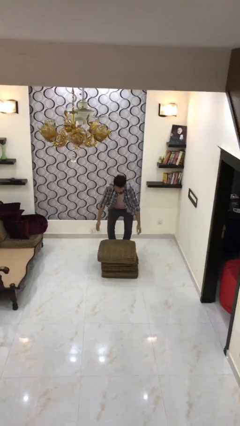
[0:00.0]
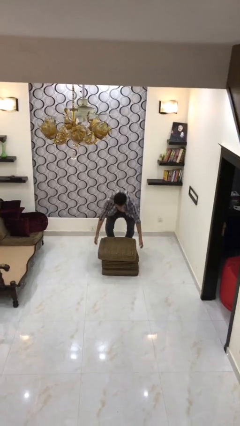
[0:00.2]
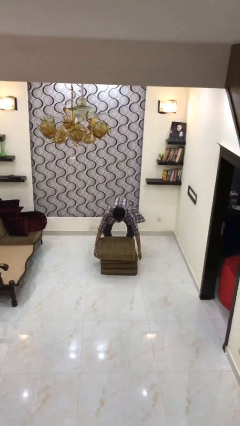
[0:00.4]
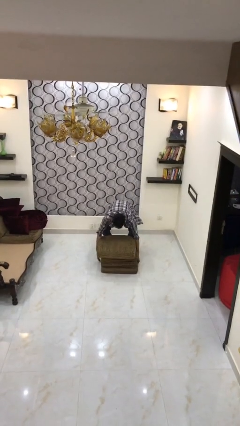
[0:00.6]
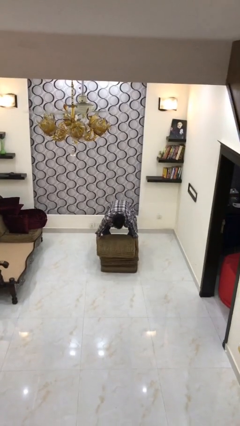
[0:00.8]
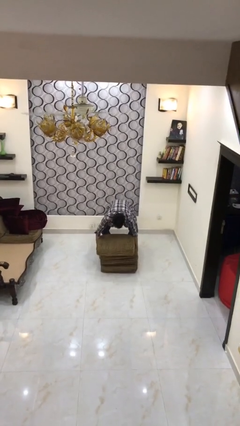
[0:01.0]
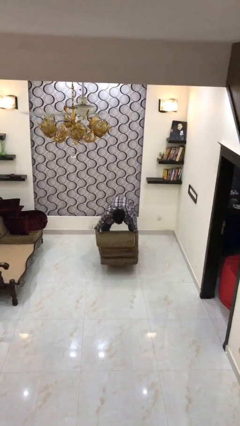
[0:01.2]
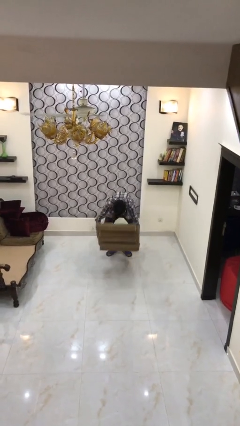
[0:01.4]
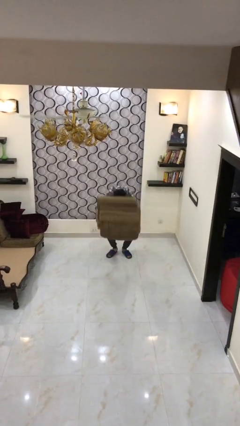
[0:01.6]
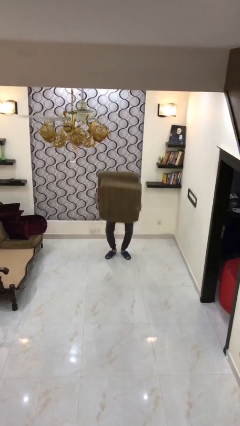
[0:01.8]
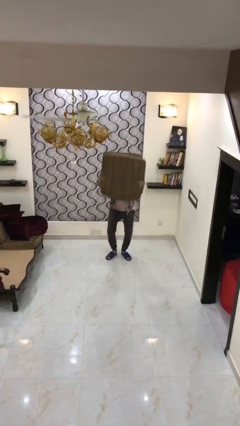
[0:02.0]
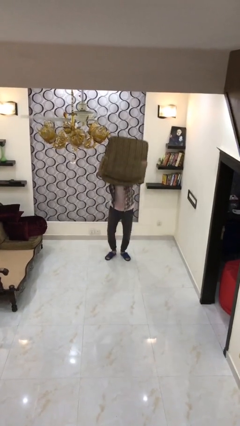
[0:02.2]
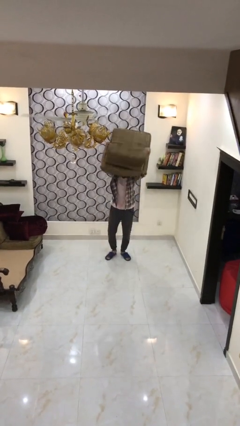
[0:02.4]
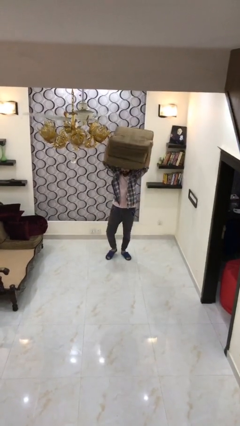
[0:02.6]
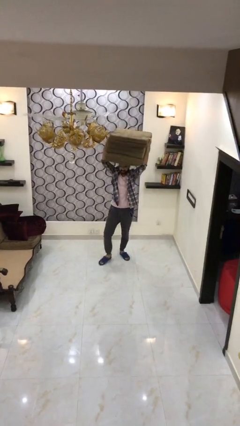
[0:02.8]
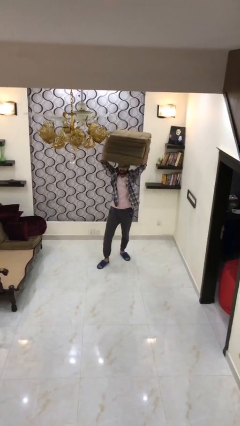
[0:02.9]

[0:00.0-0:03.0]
person picks up object from floor

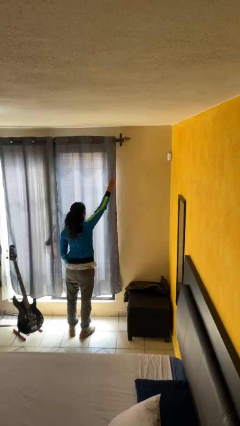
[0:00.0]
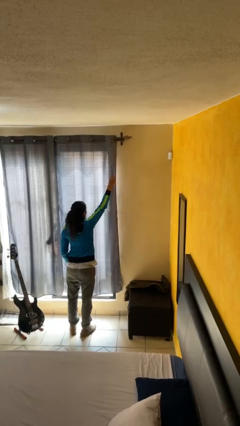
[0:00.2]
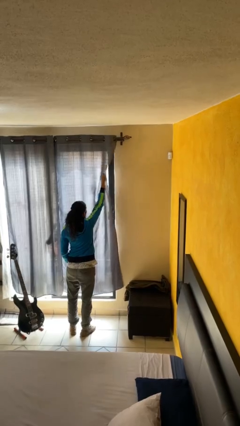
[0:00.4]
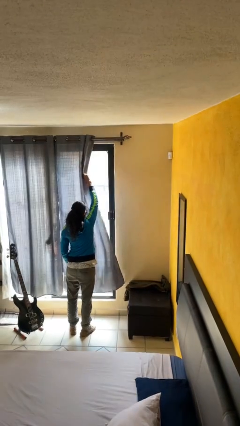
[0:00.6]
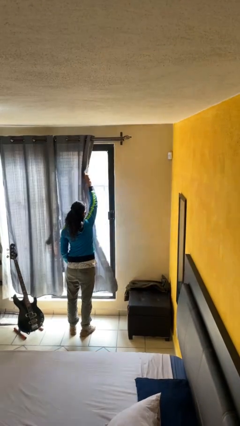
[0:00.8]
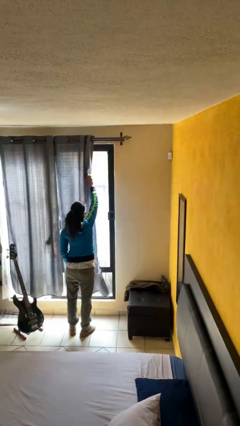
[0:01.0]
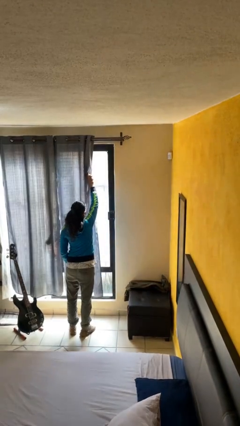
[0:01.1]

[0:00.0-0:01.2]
person opens curtains

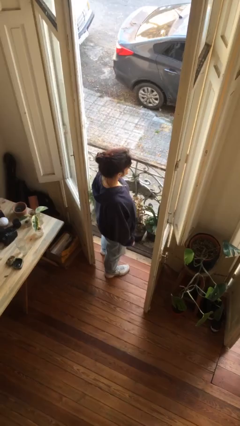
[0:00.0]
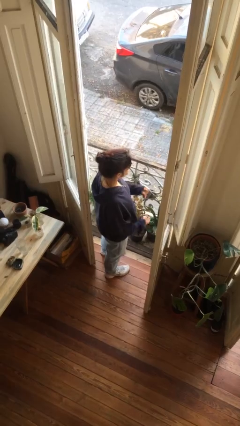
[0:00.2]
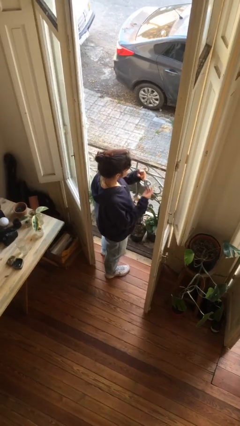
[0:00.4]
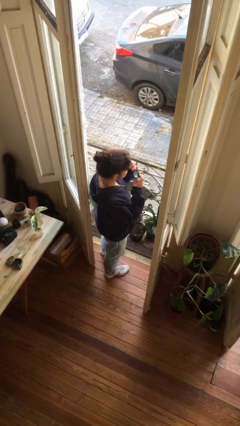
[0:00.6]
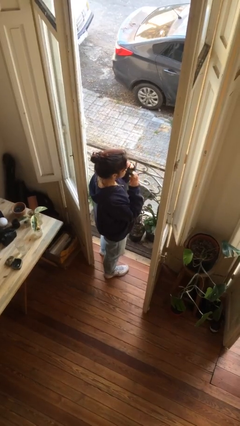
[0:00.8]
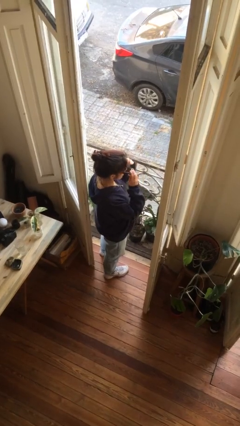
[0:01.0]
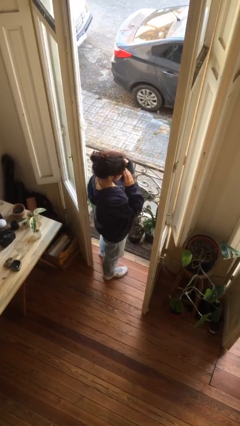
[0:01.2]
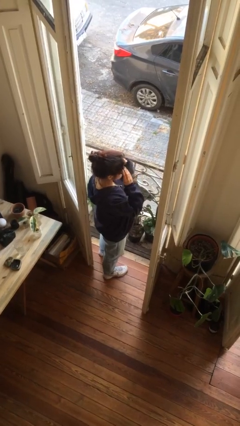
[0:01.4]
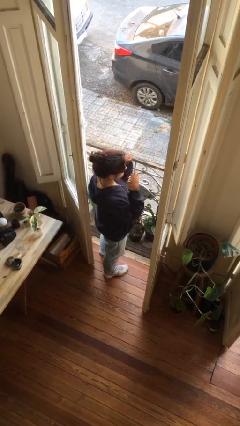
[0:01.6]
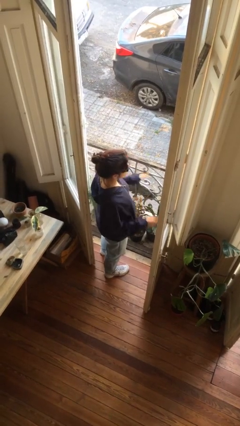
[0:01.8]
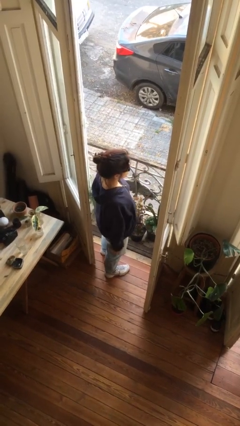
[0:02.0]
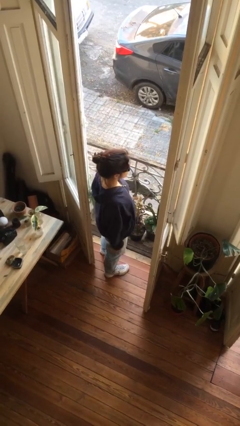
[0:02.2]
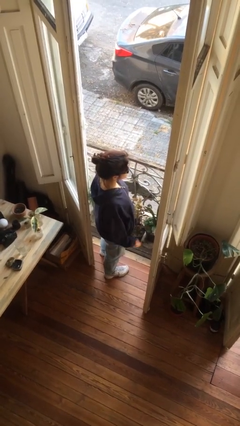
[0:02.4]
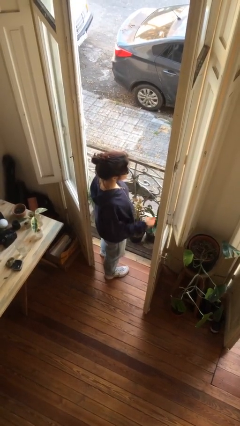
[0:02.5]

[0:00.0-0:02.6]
person puts on sunglasses

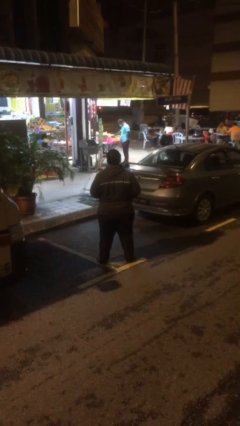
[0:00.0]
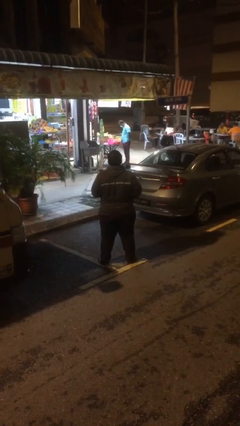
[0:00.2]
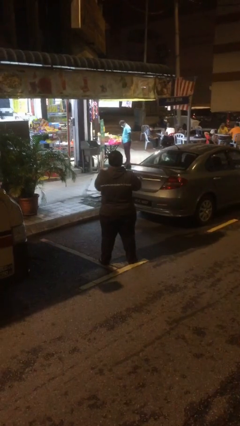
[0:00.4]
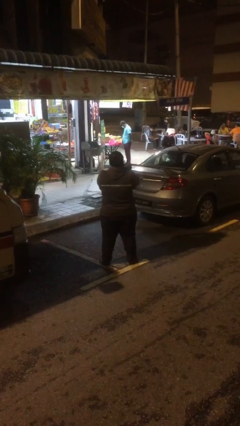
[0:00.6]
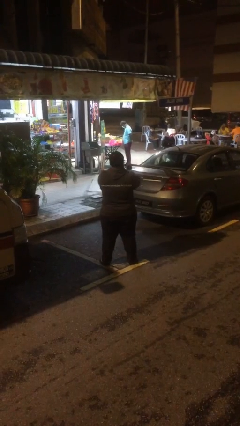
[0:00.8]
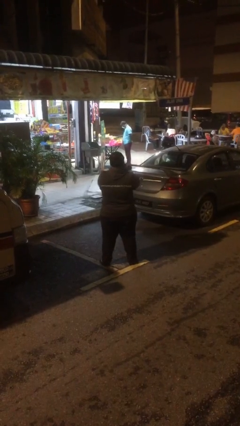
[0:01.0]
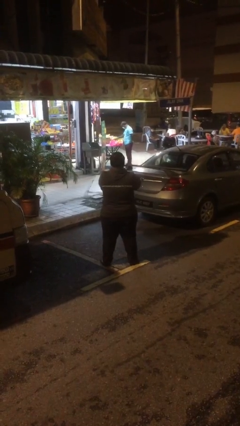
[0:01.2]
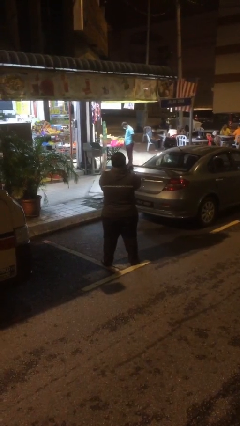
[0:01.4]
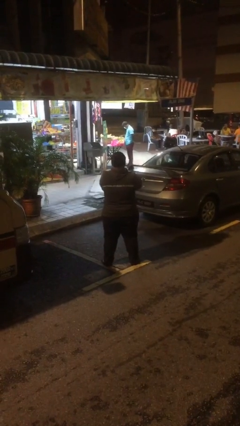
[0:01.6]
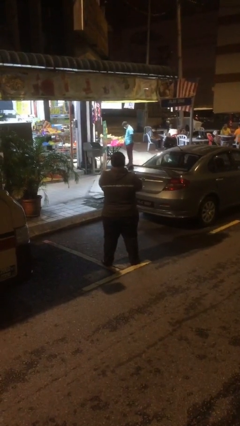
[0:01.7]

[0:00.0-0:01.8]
person blows into hands

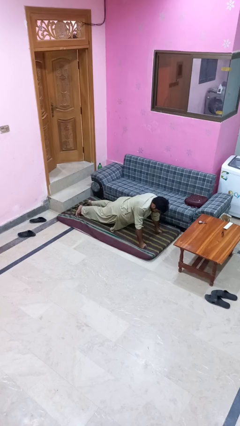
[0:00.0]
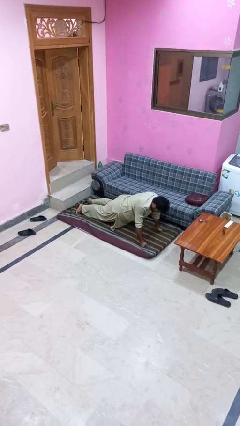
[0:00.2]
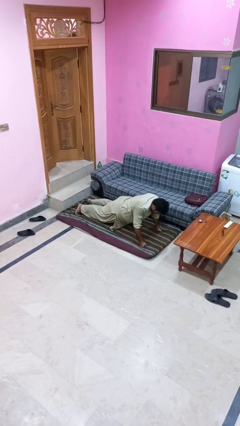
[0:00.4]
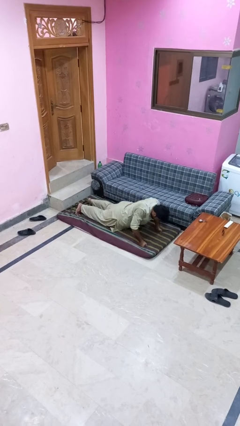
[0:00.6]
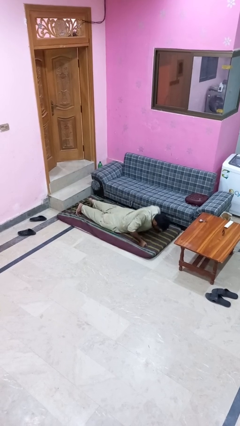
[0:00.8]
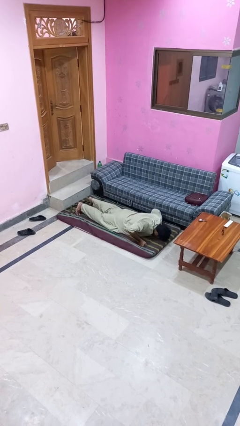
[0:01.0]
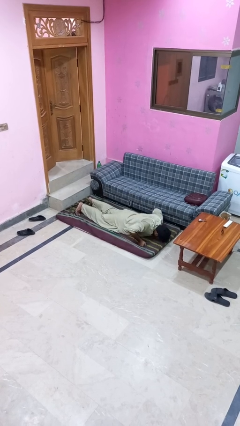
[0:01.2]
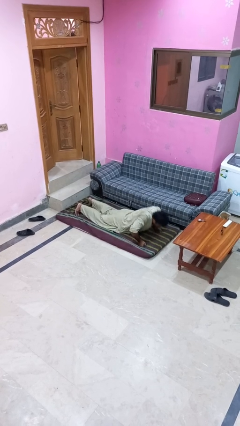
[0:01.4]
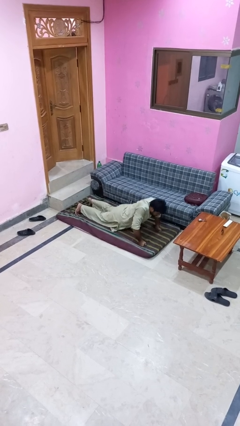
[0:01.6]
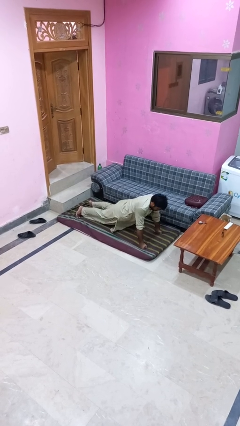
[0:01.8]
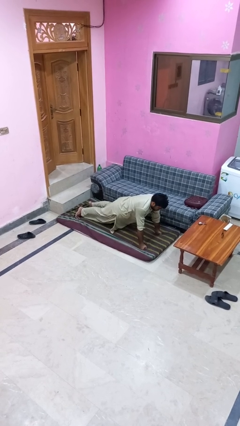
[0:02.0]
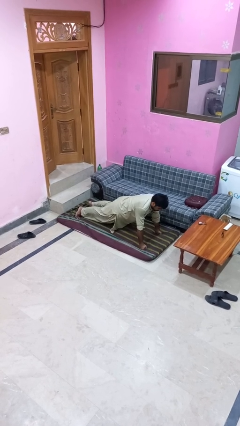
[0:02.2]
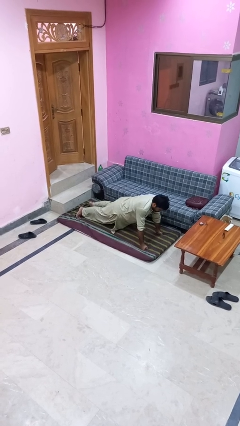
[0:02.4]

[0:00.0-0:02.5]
person exercises with pushup

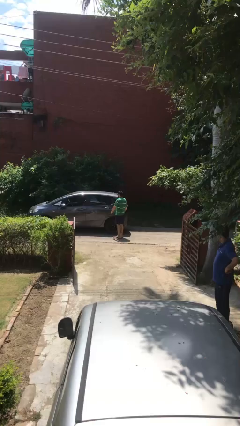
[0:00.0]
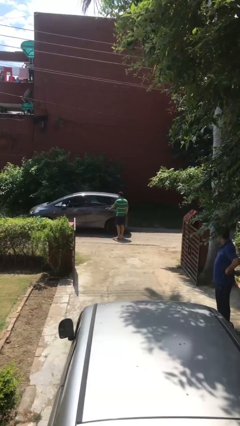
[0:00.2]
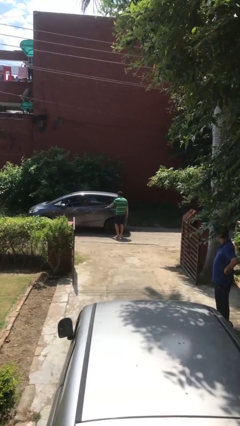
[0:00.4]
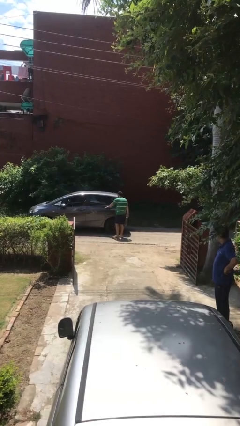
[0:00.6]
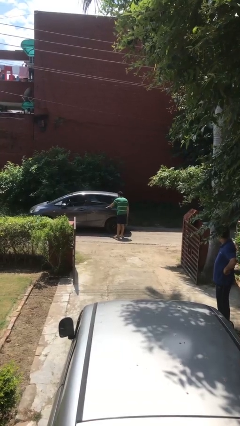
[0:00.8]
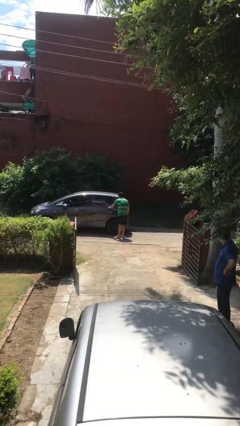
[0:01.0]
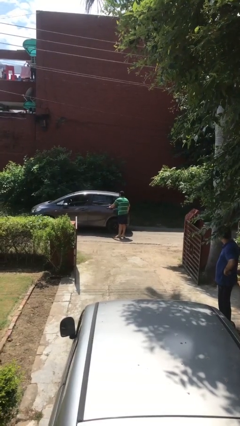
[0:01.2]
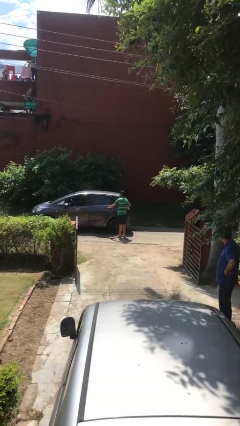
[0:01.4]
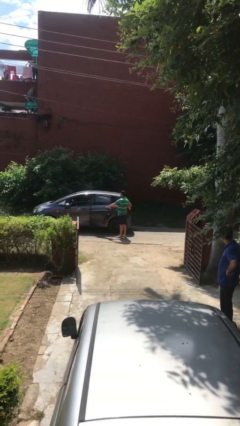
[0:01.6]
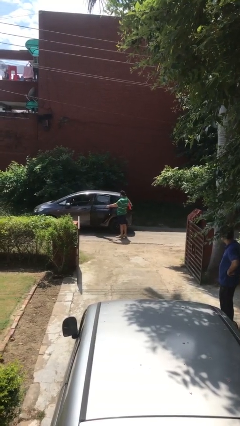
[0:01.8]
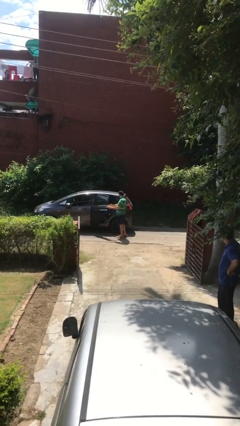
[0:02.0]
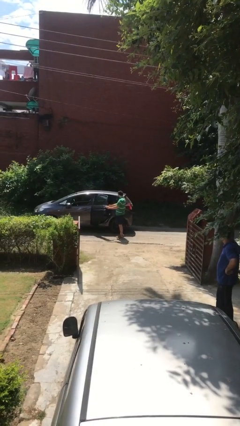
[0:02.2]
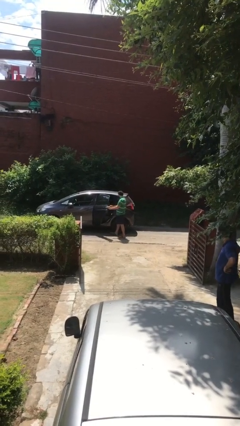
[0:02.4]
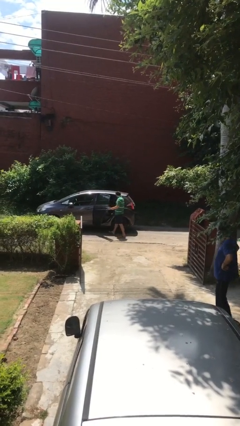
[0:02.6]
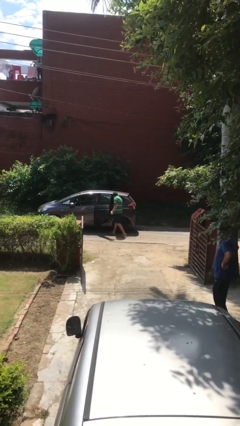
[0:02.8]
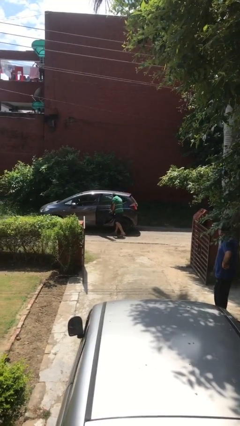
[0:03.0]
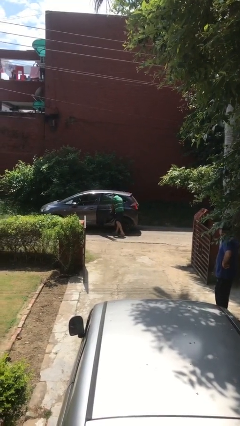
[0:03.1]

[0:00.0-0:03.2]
person opens car door

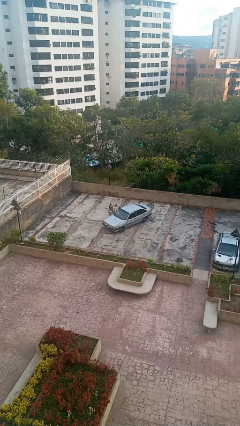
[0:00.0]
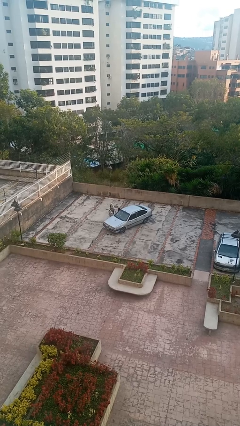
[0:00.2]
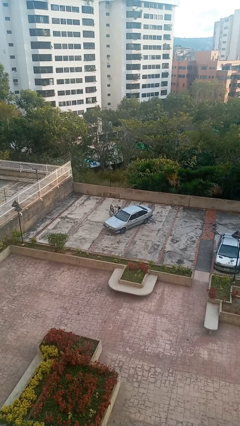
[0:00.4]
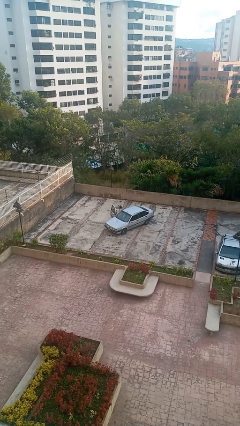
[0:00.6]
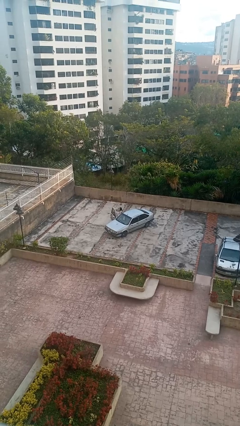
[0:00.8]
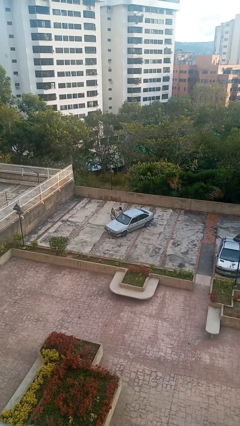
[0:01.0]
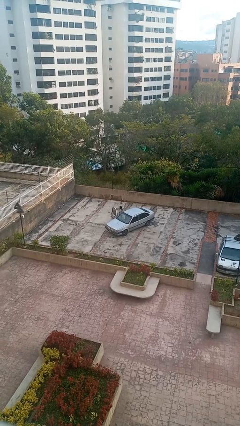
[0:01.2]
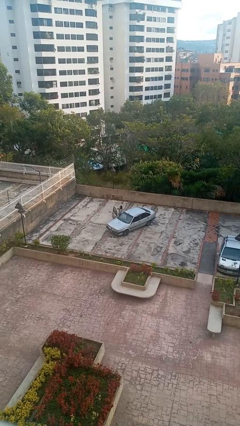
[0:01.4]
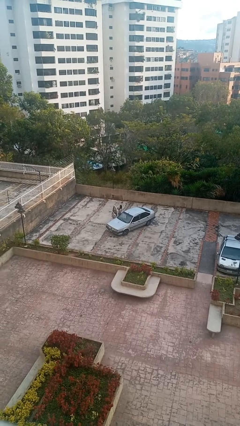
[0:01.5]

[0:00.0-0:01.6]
person exits car

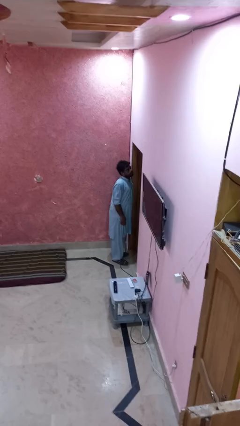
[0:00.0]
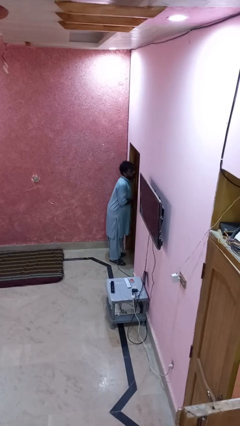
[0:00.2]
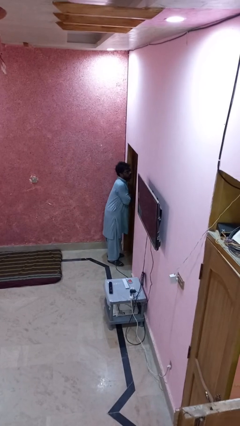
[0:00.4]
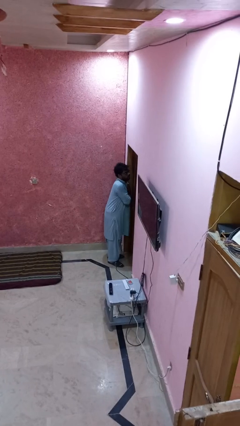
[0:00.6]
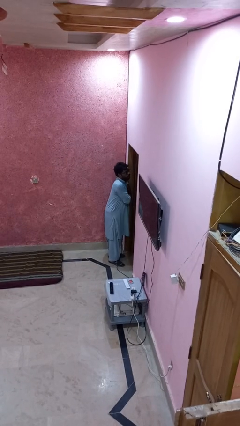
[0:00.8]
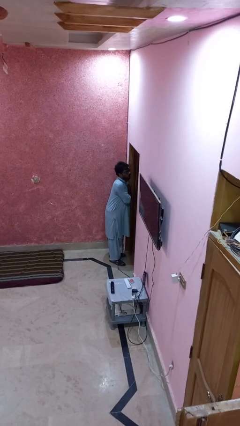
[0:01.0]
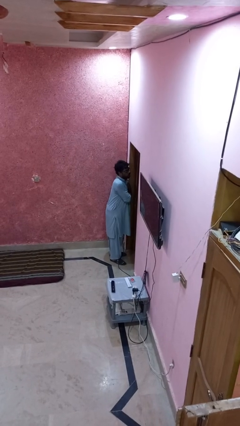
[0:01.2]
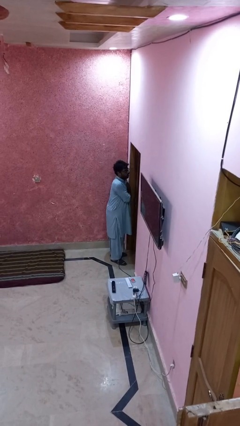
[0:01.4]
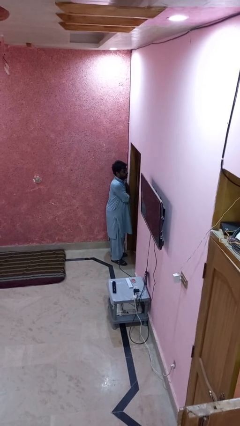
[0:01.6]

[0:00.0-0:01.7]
person bumps into wall
